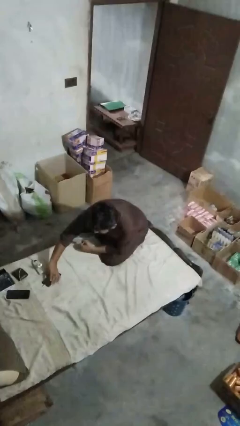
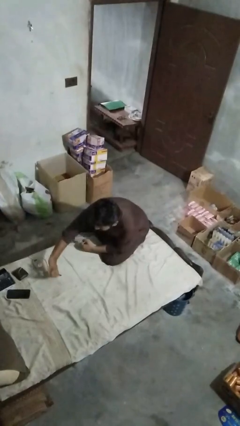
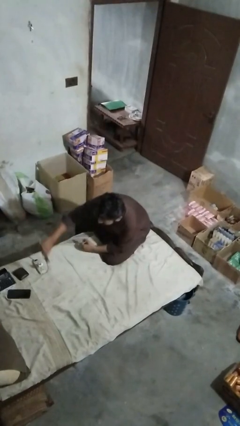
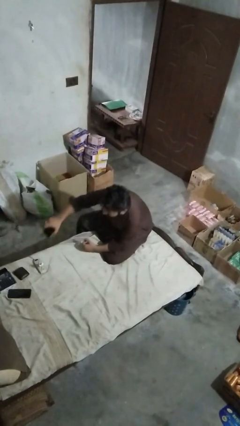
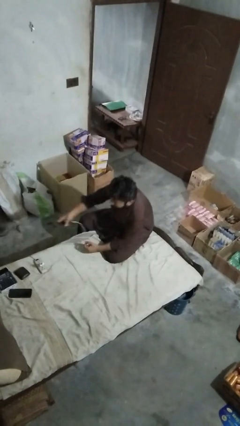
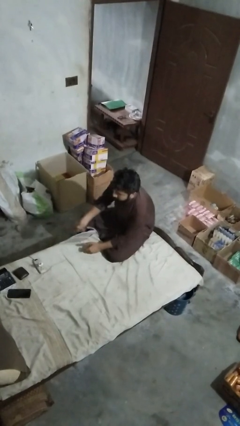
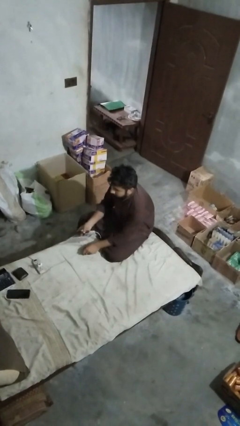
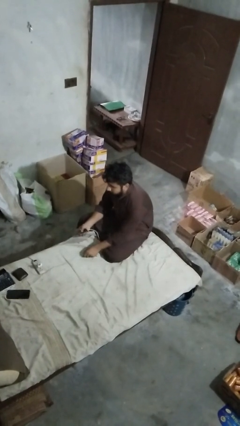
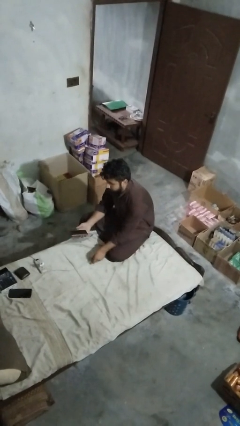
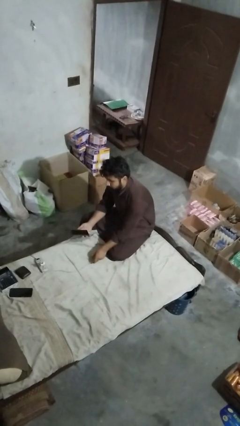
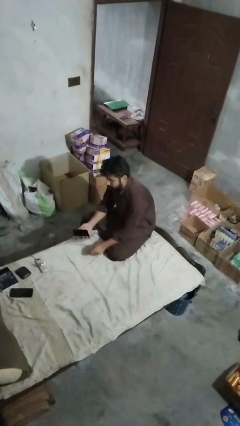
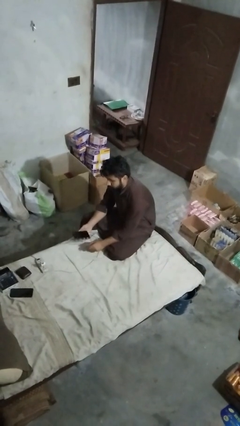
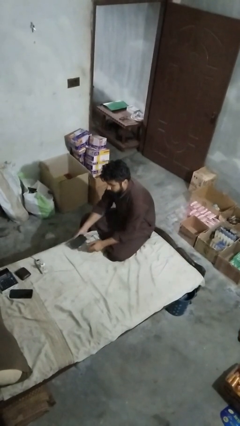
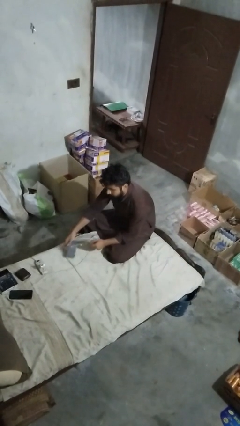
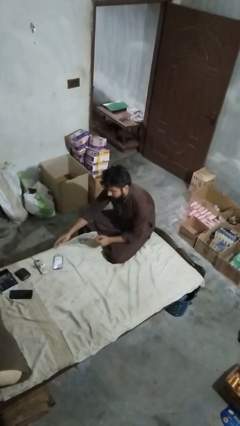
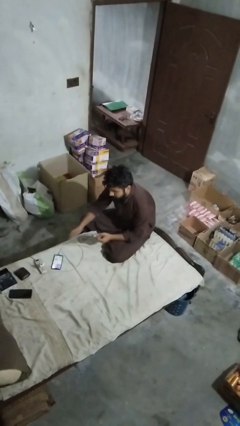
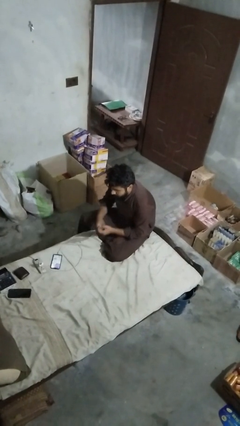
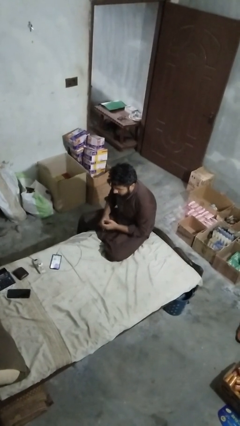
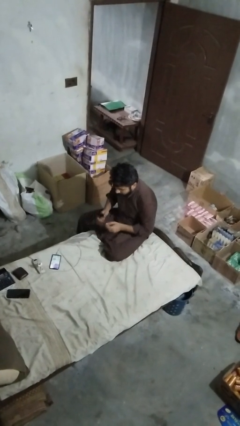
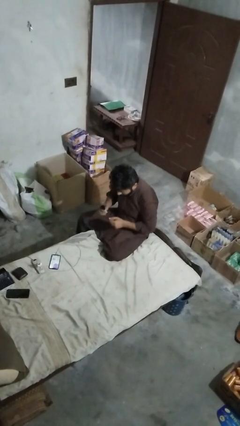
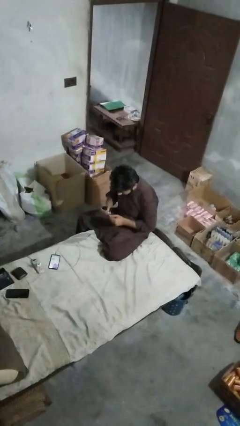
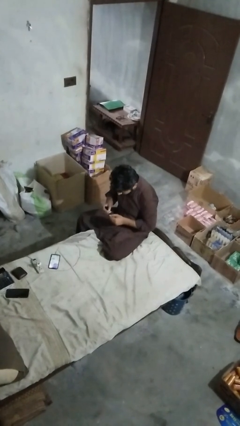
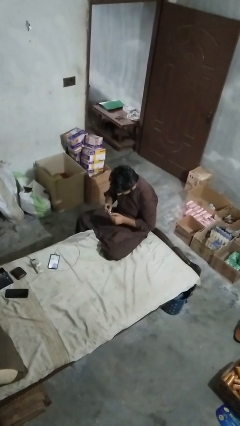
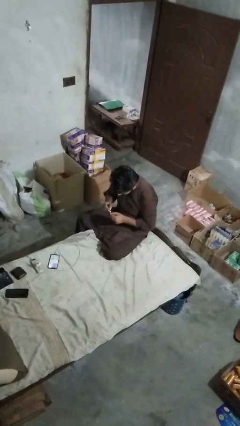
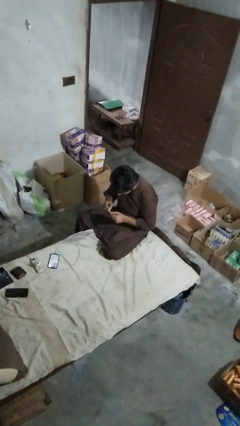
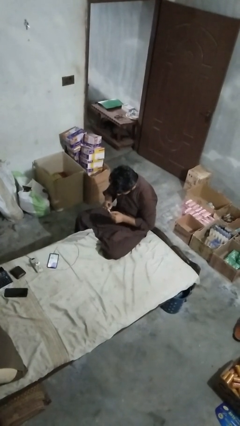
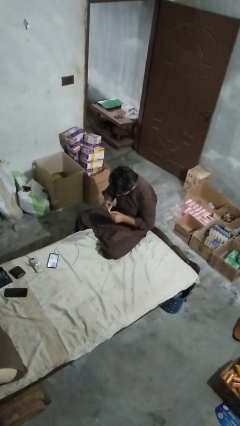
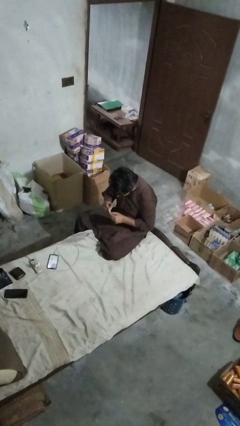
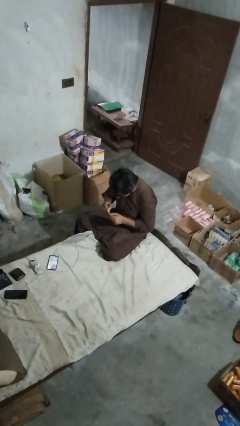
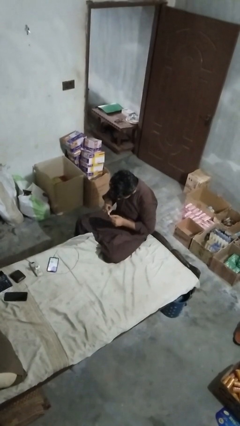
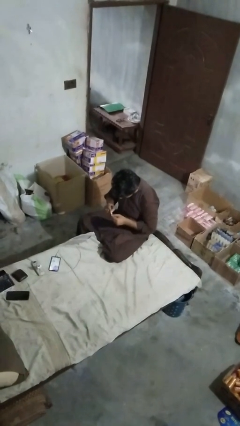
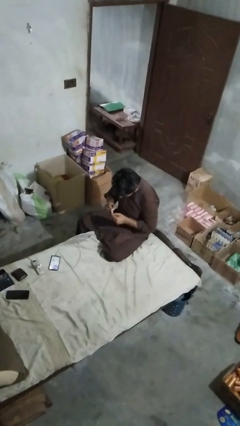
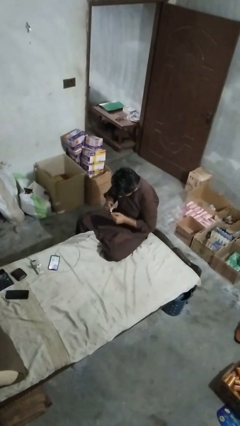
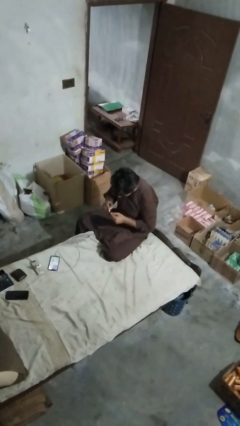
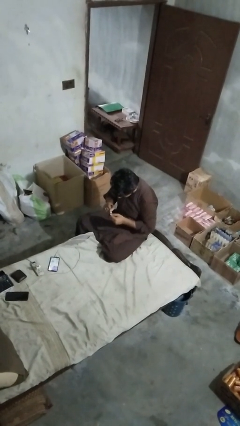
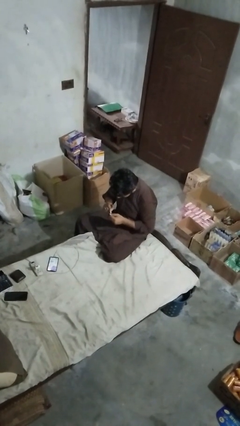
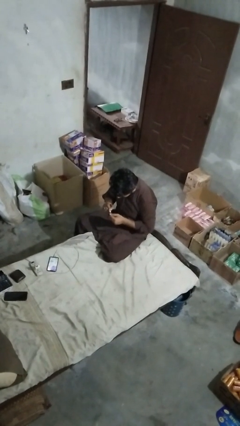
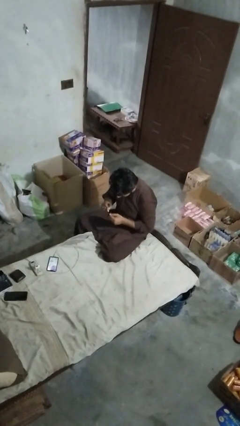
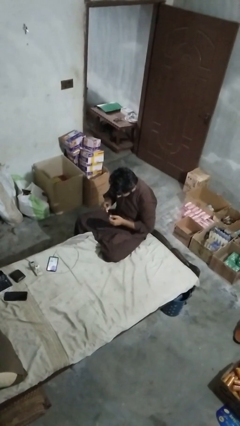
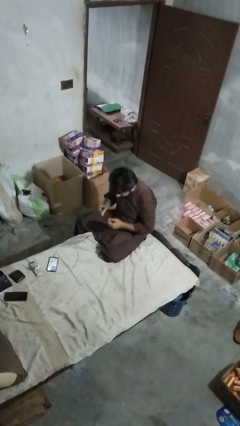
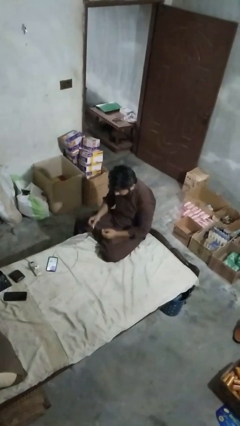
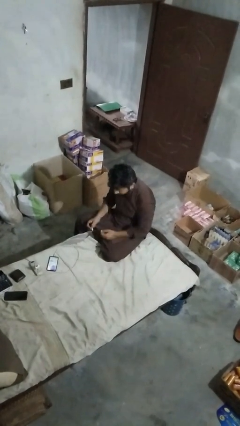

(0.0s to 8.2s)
person paints fingernails

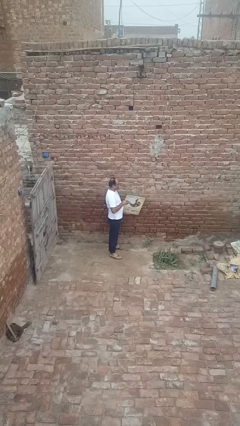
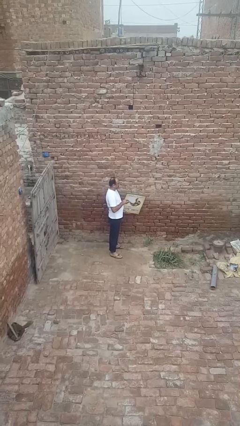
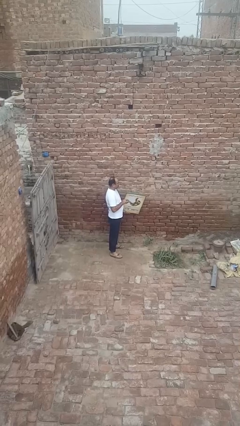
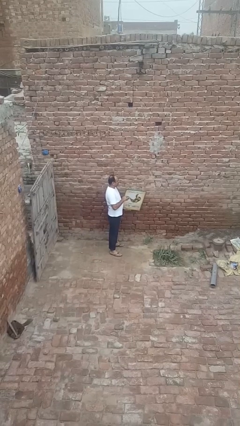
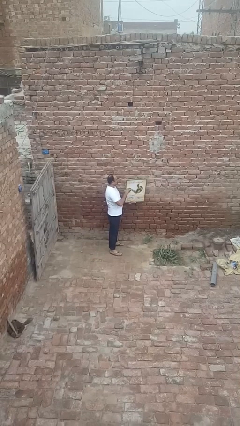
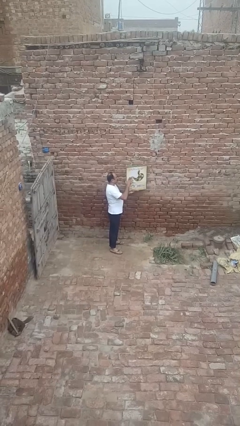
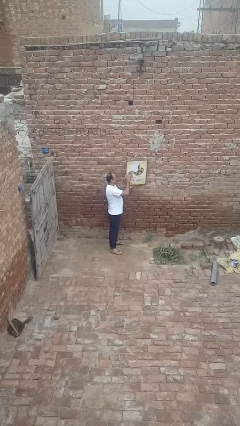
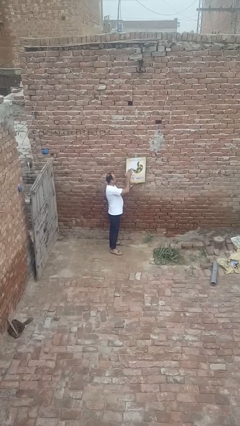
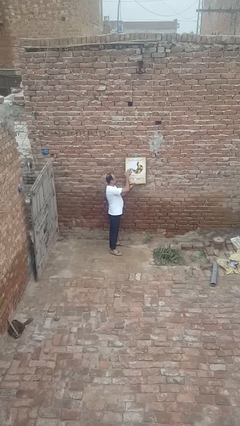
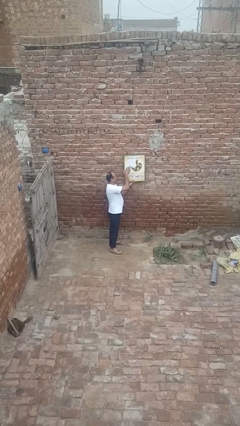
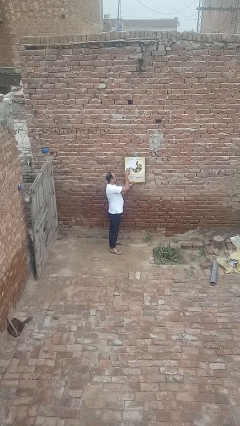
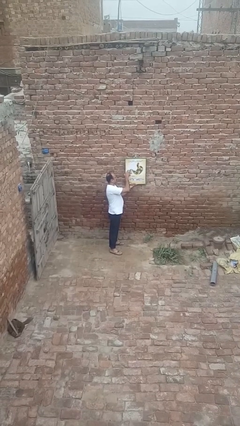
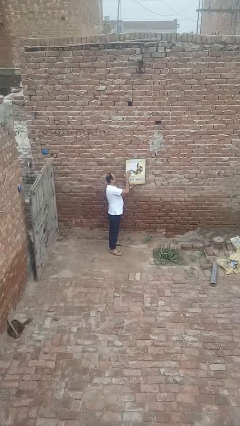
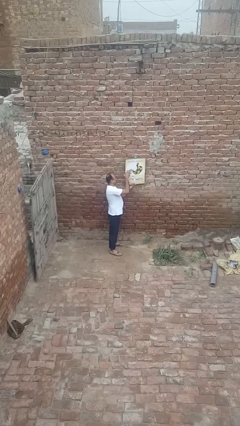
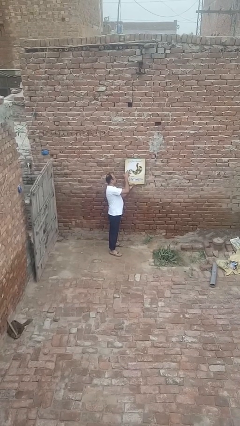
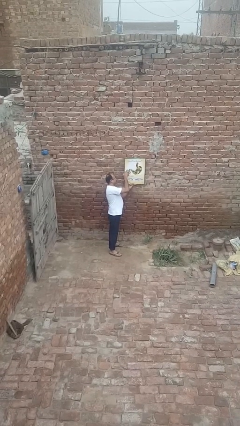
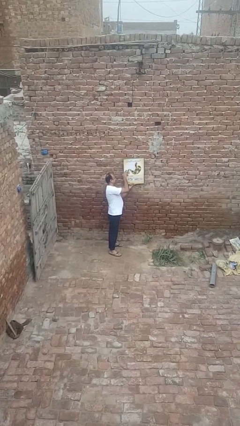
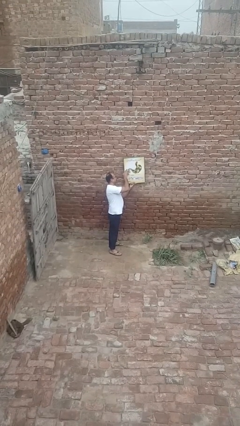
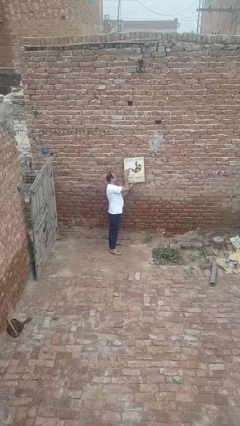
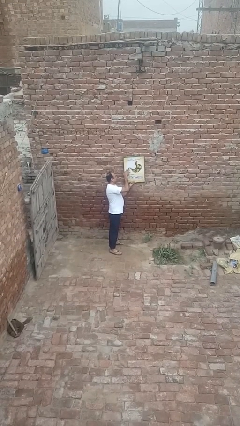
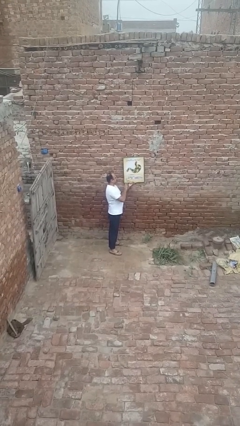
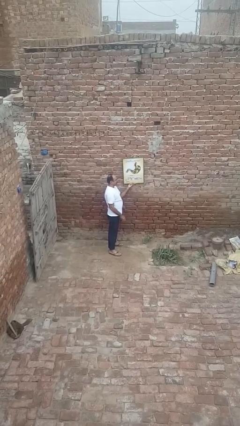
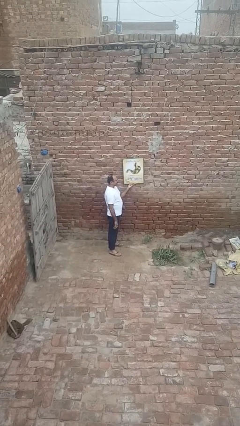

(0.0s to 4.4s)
person puts up picture frame

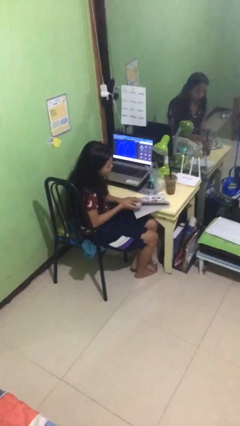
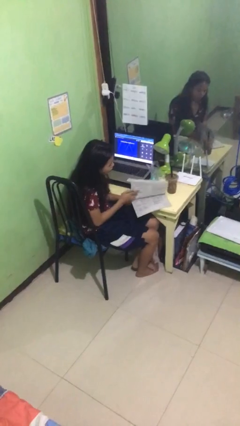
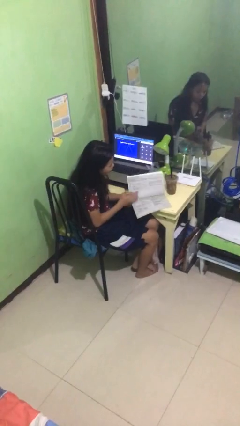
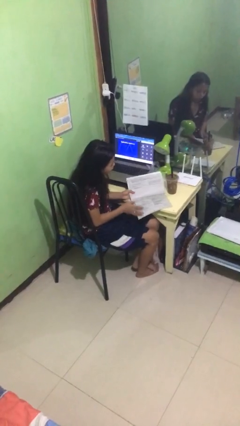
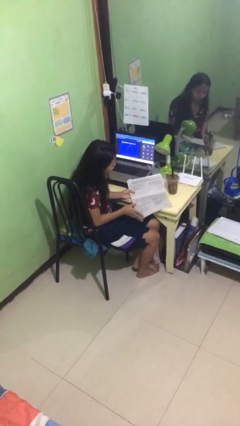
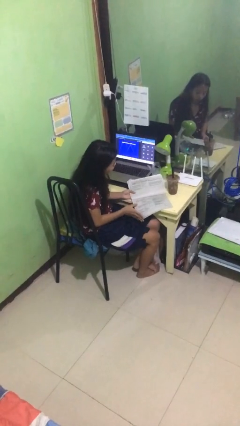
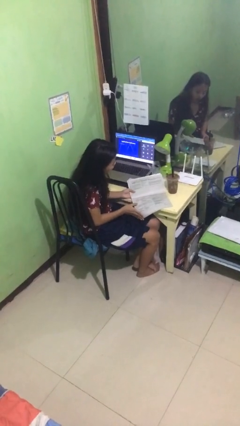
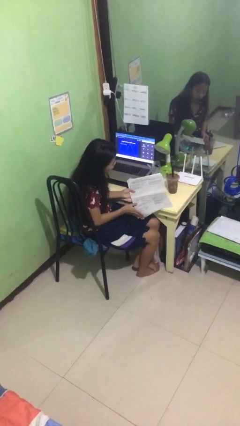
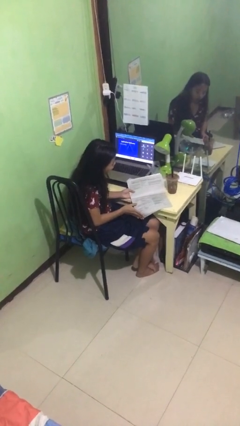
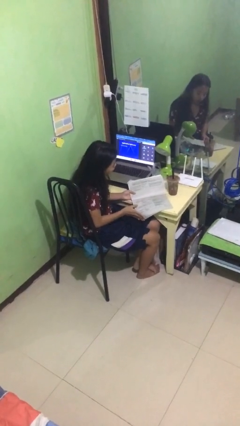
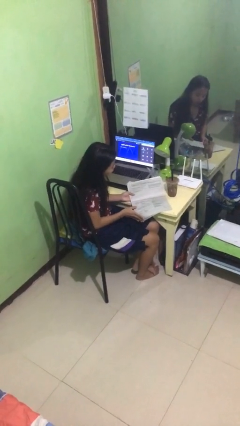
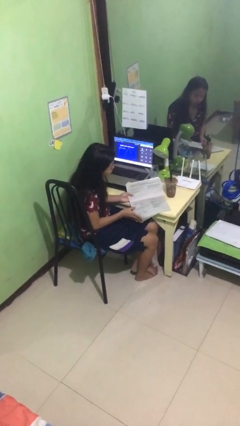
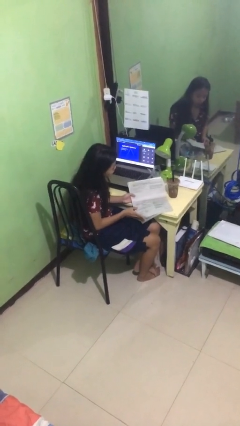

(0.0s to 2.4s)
person reads document

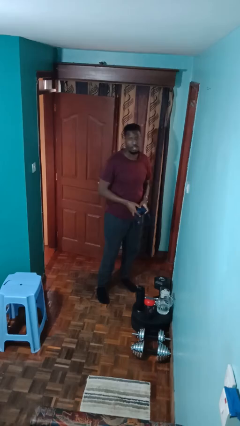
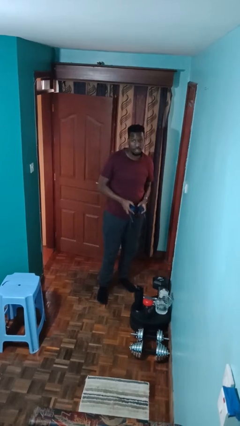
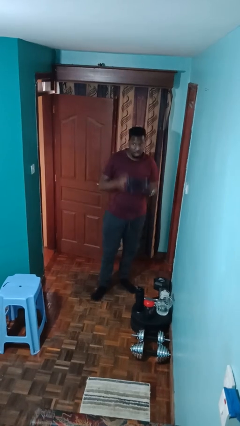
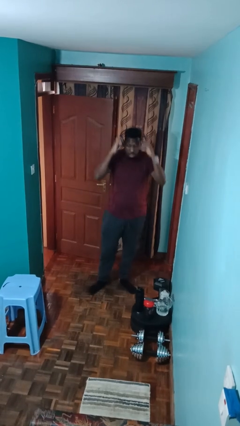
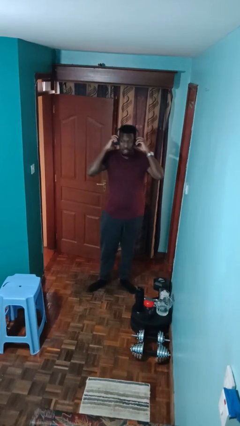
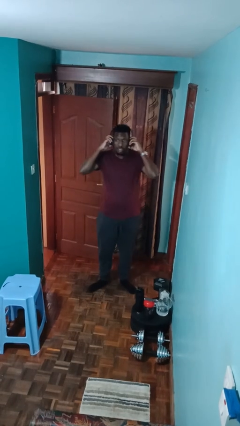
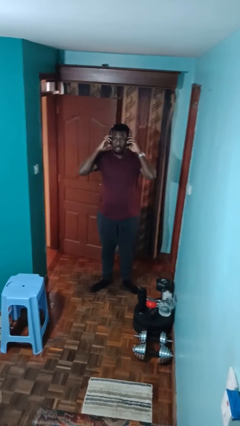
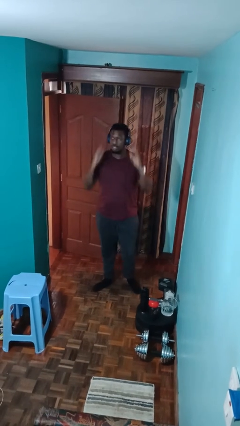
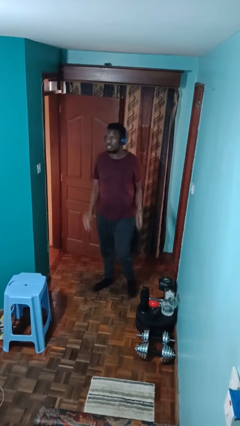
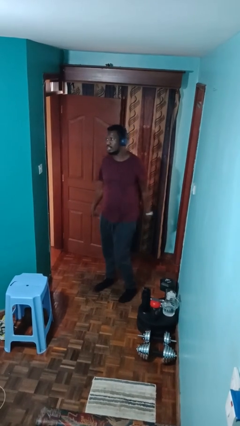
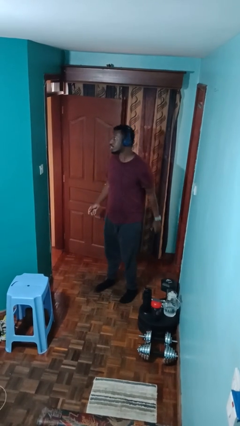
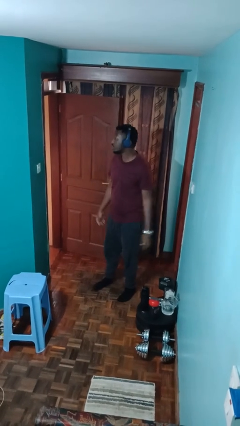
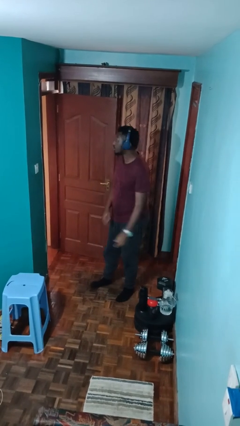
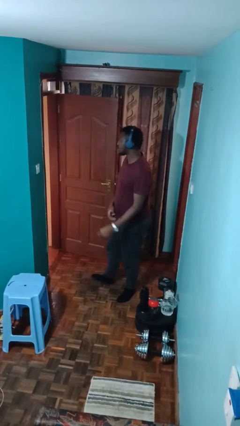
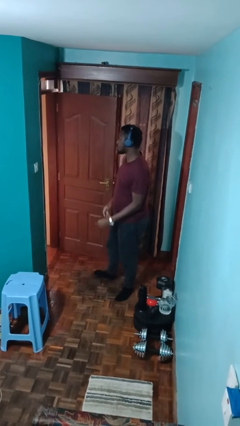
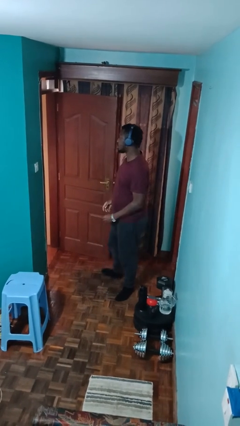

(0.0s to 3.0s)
person puts on headphones
